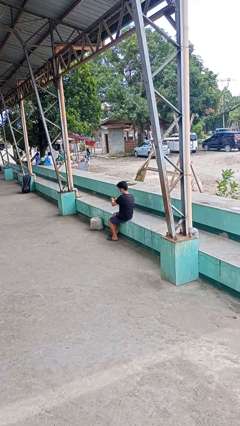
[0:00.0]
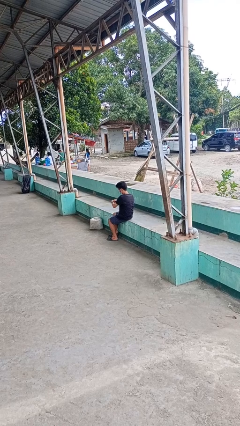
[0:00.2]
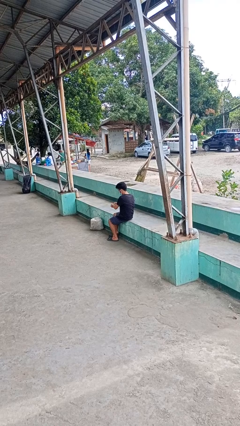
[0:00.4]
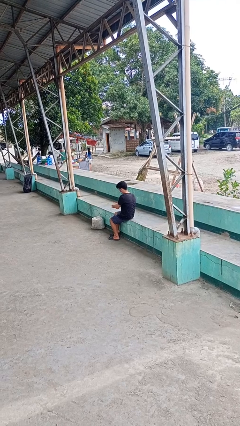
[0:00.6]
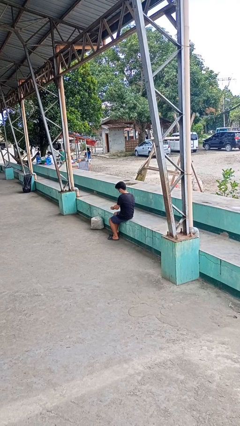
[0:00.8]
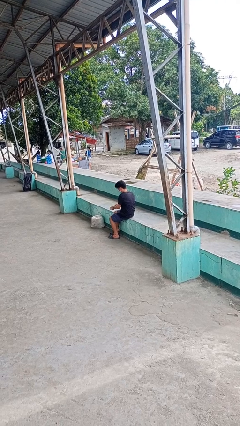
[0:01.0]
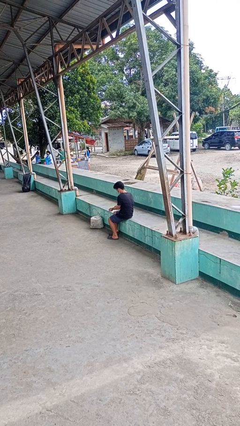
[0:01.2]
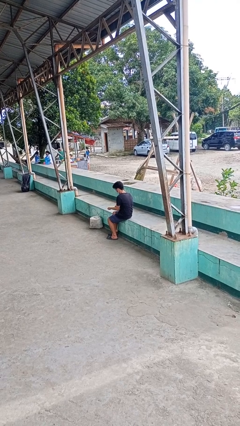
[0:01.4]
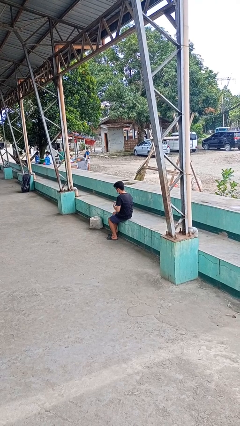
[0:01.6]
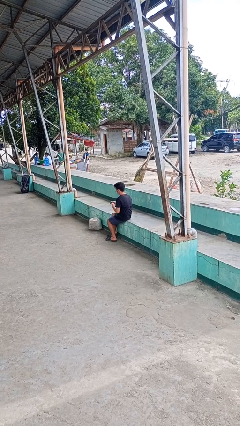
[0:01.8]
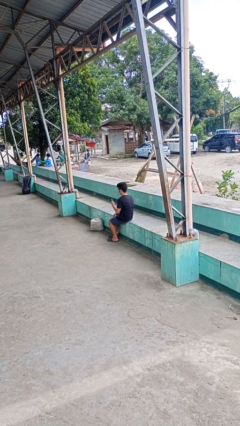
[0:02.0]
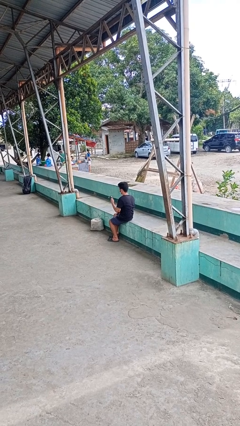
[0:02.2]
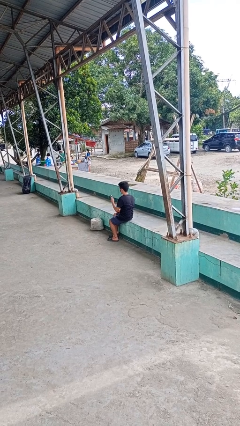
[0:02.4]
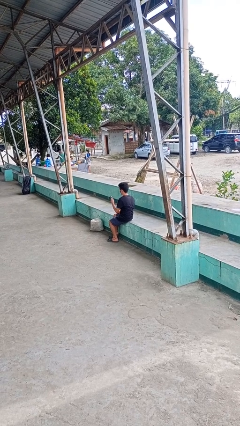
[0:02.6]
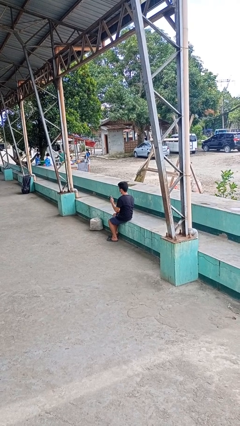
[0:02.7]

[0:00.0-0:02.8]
person takes off wristwatch

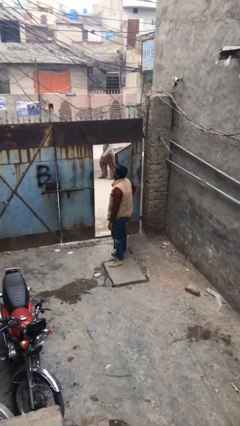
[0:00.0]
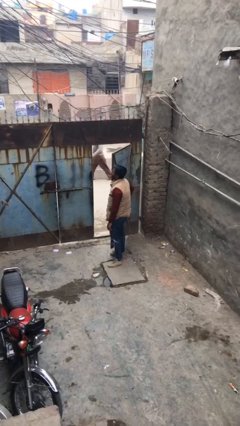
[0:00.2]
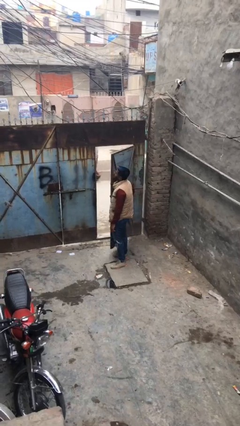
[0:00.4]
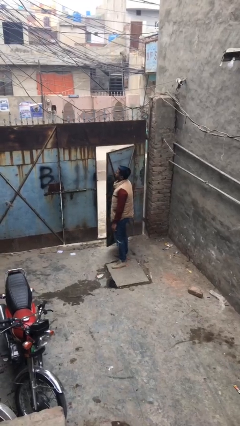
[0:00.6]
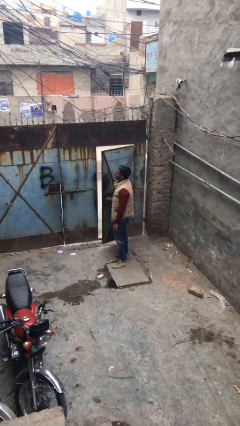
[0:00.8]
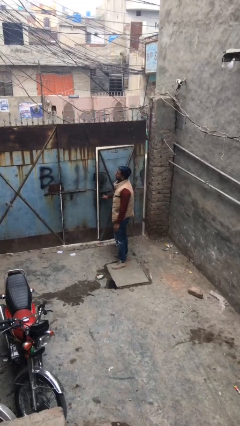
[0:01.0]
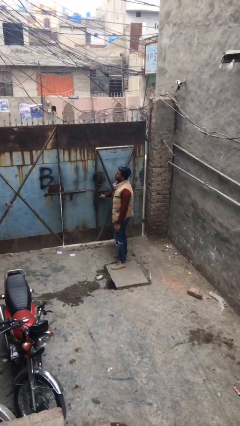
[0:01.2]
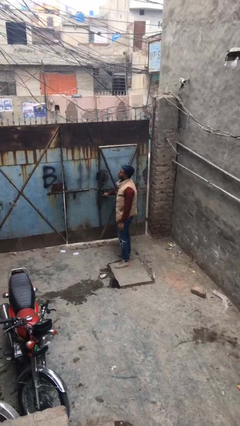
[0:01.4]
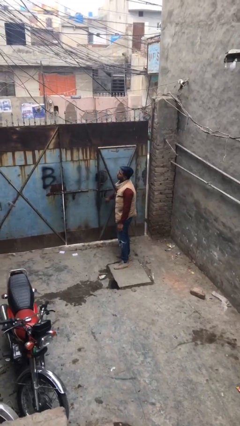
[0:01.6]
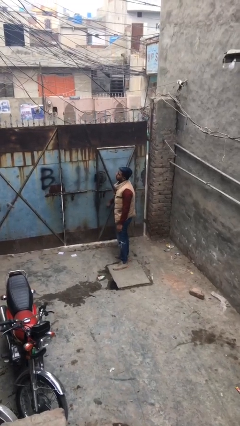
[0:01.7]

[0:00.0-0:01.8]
person closes facility door

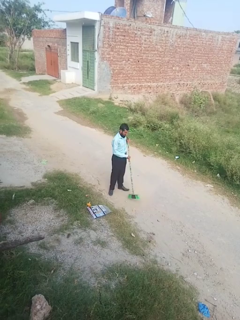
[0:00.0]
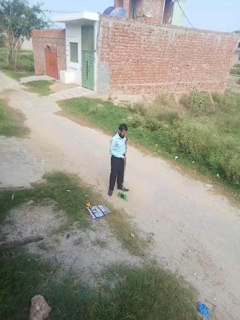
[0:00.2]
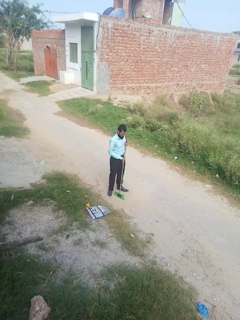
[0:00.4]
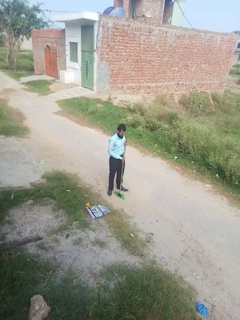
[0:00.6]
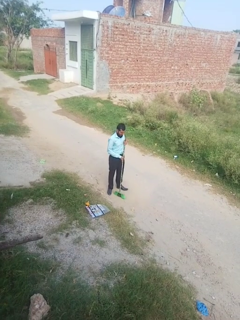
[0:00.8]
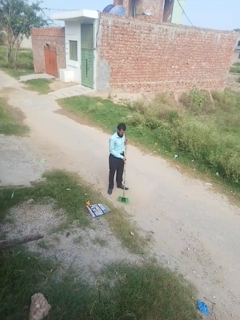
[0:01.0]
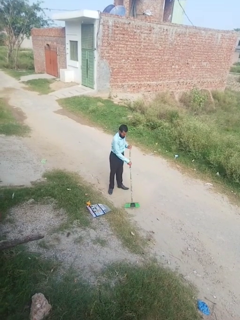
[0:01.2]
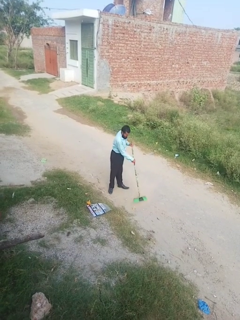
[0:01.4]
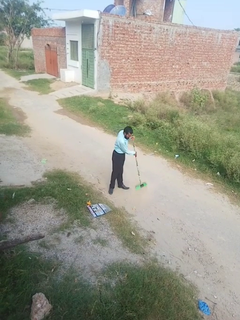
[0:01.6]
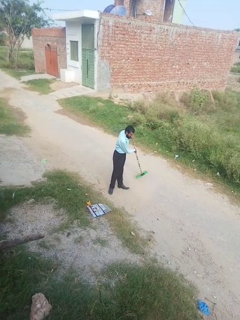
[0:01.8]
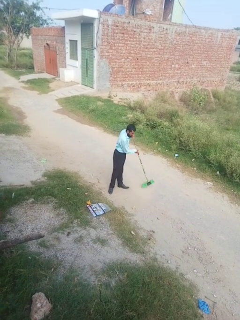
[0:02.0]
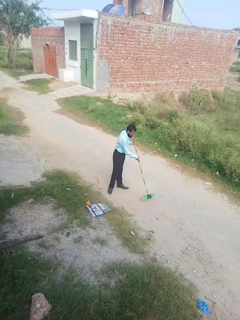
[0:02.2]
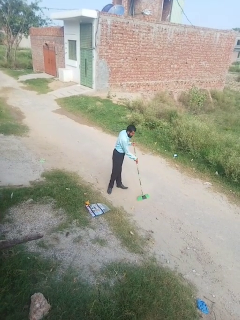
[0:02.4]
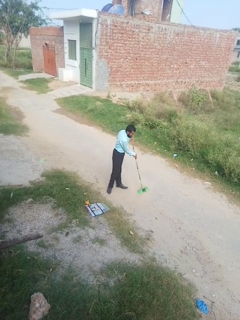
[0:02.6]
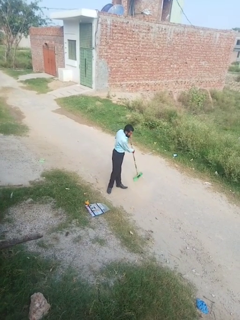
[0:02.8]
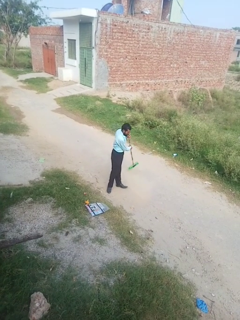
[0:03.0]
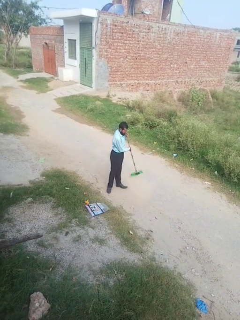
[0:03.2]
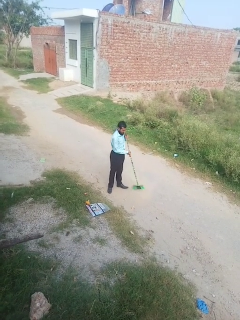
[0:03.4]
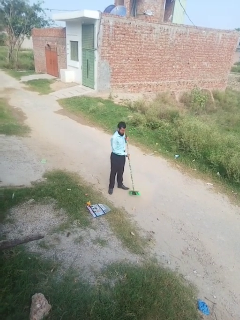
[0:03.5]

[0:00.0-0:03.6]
person sweeps floor

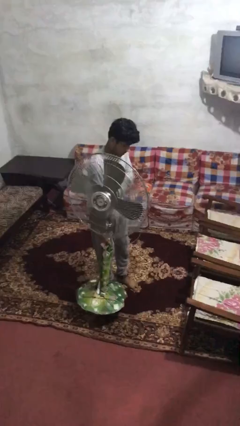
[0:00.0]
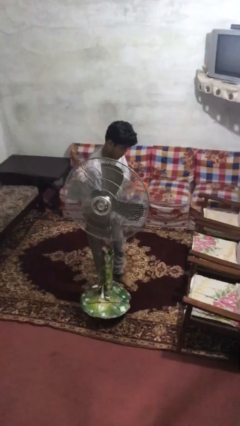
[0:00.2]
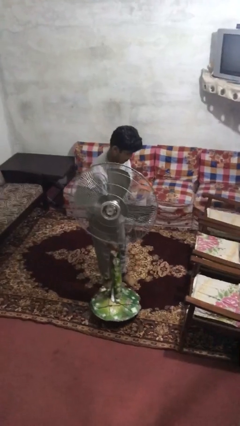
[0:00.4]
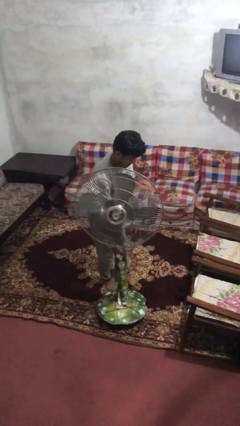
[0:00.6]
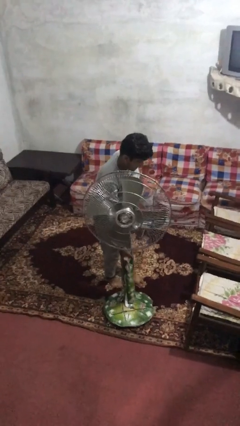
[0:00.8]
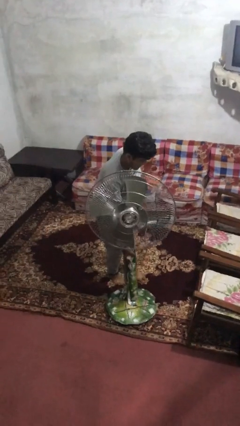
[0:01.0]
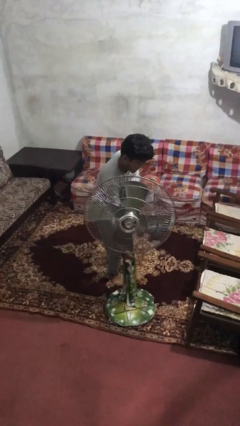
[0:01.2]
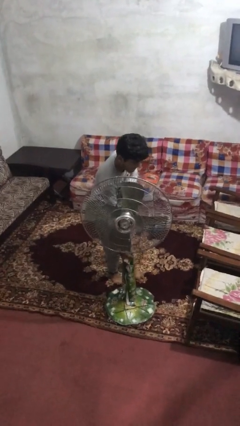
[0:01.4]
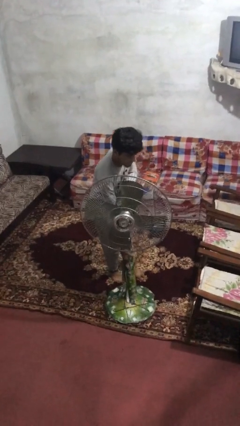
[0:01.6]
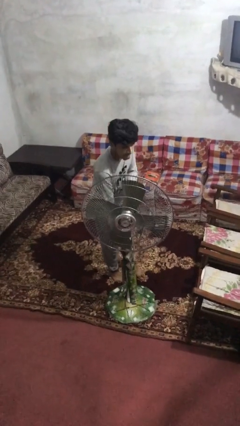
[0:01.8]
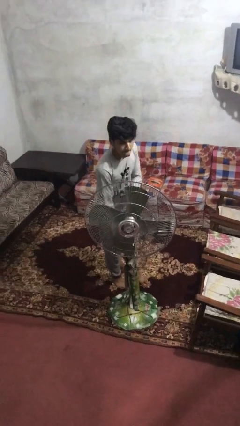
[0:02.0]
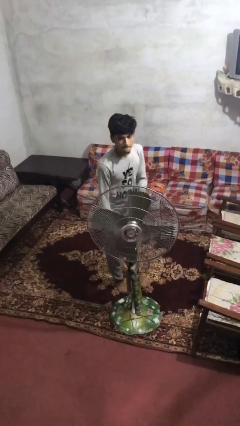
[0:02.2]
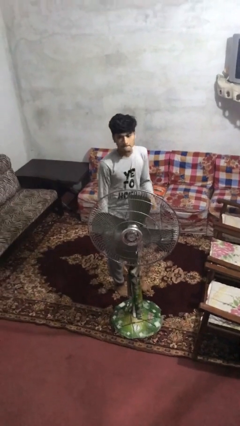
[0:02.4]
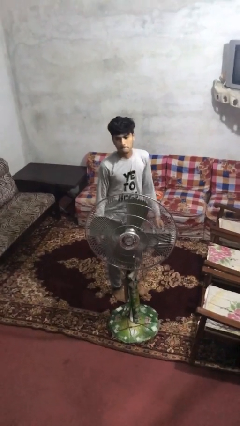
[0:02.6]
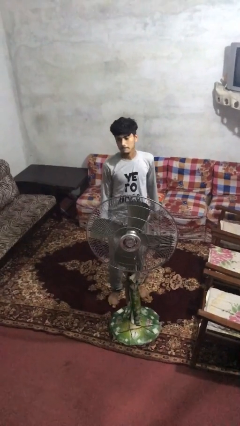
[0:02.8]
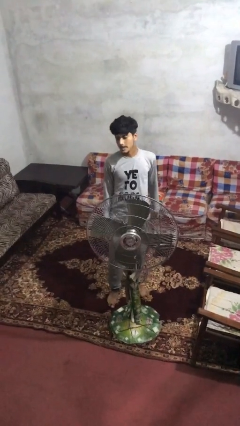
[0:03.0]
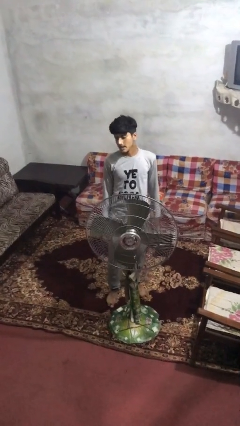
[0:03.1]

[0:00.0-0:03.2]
person puts down object on floor

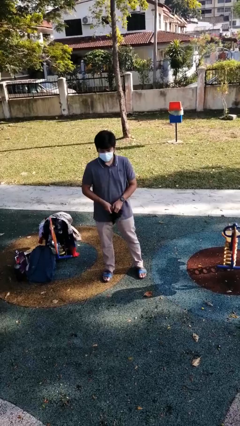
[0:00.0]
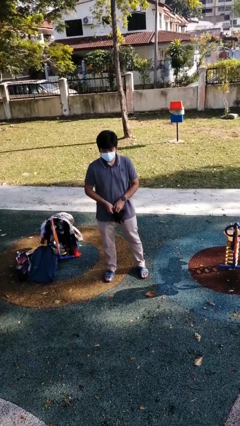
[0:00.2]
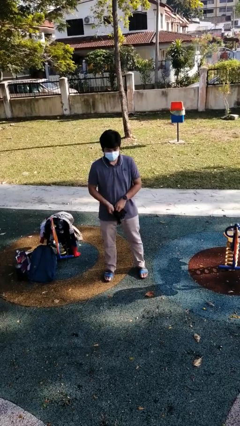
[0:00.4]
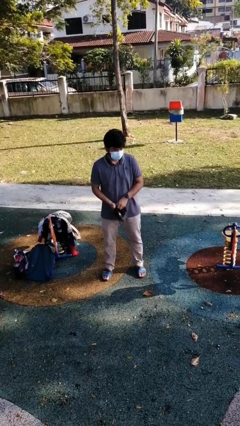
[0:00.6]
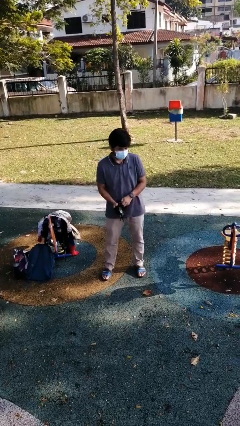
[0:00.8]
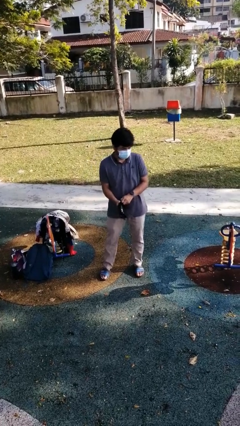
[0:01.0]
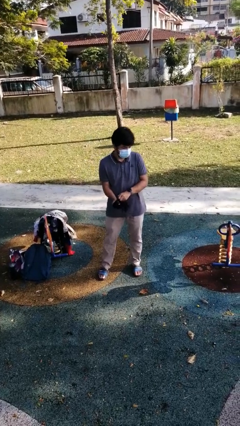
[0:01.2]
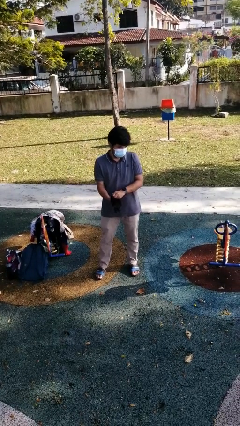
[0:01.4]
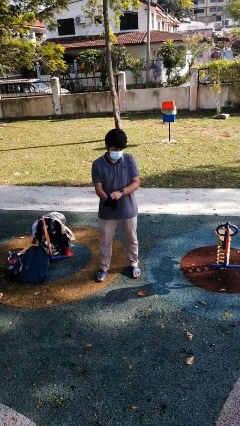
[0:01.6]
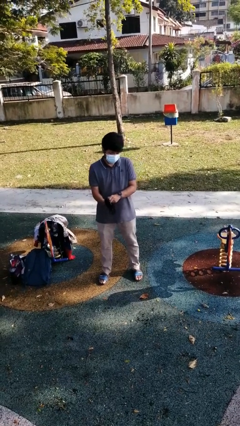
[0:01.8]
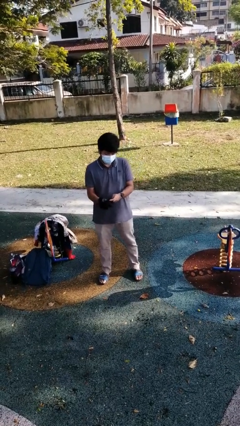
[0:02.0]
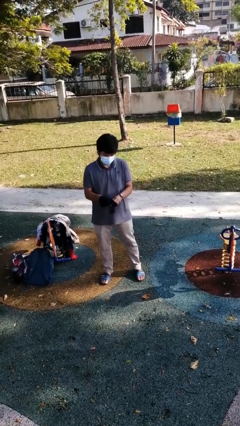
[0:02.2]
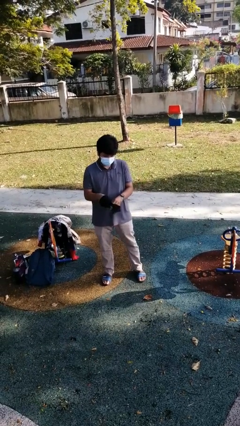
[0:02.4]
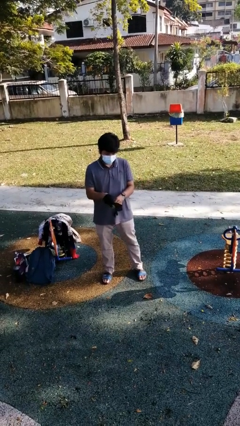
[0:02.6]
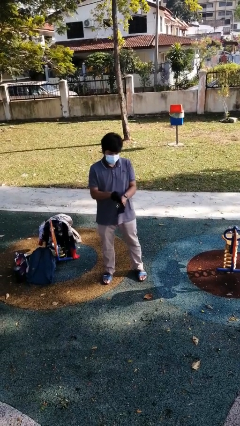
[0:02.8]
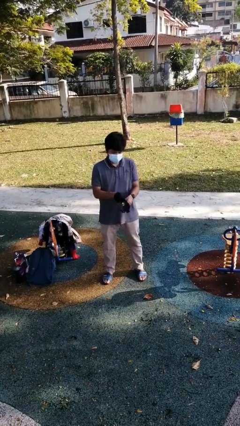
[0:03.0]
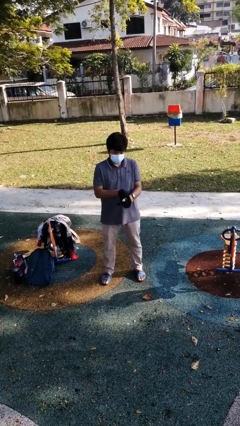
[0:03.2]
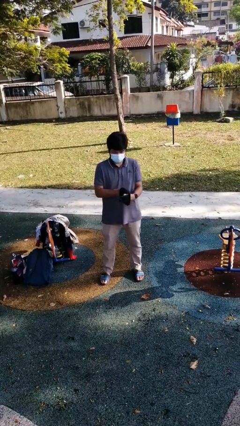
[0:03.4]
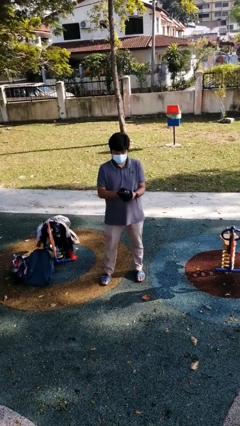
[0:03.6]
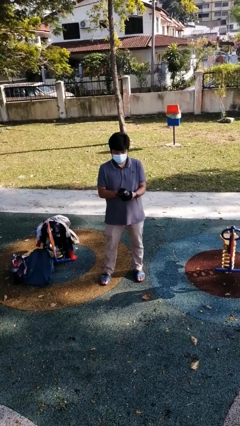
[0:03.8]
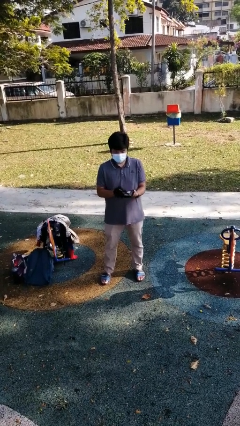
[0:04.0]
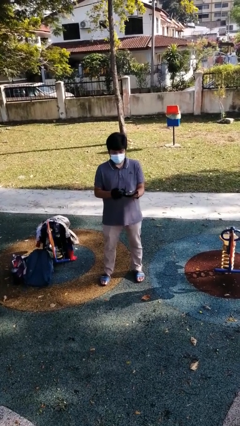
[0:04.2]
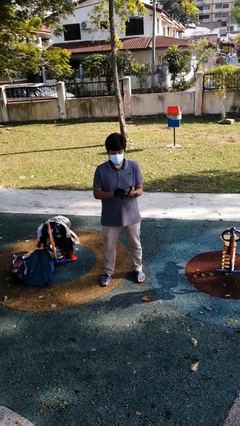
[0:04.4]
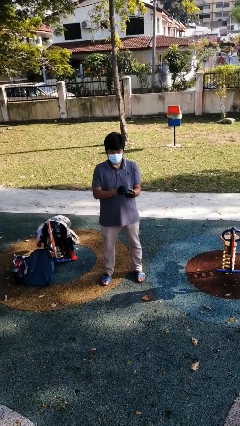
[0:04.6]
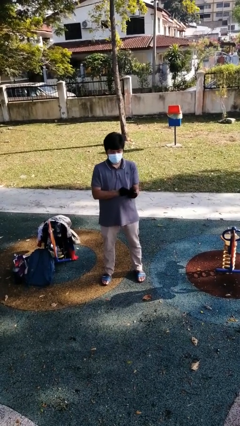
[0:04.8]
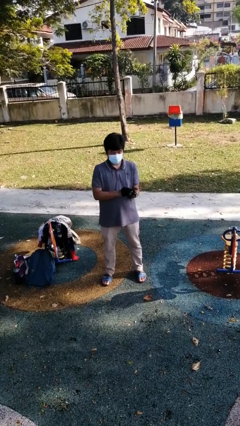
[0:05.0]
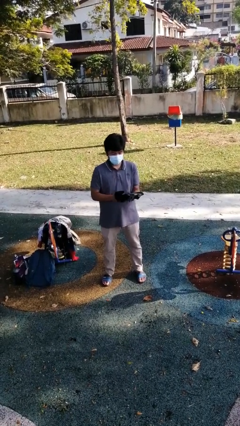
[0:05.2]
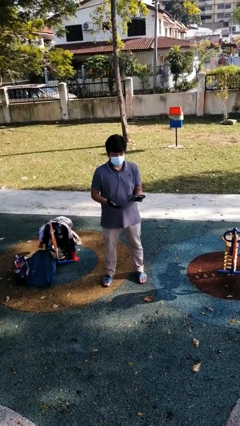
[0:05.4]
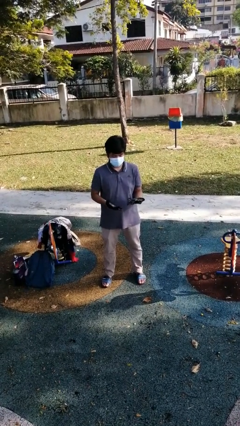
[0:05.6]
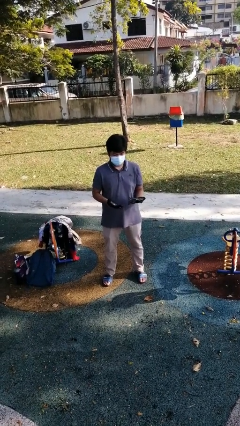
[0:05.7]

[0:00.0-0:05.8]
person puts on gloves

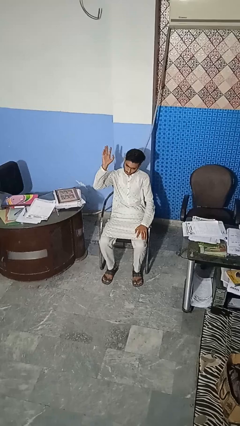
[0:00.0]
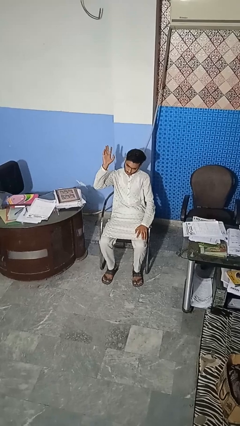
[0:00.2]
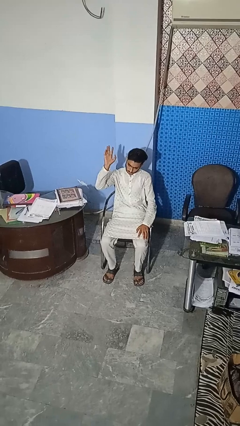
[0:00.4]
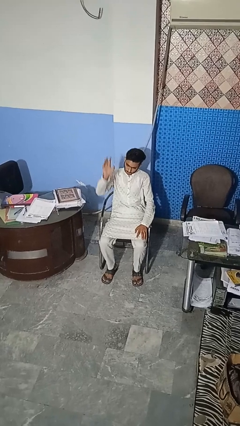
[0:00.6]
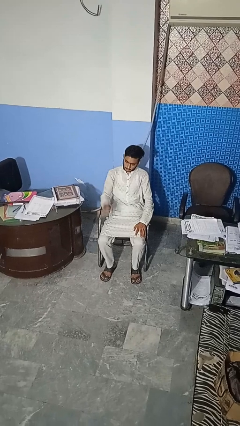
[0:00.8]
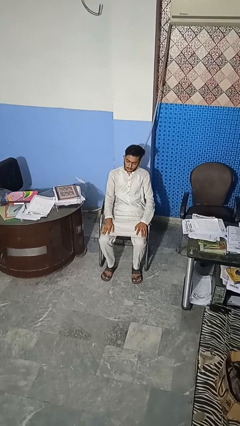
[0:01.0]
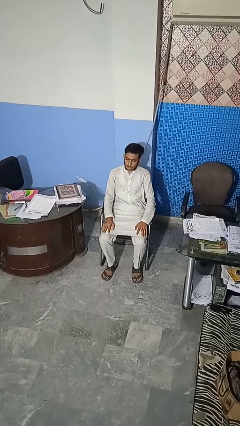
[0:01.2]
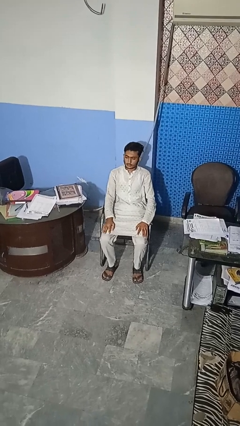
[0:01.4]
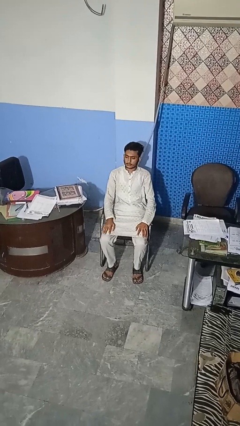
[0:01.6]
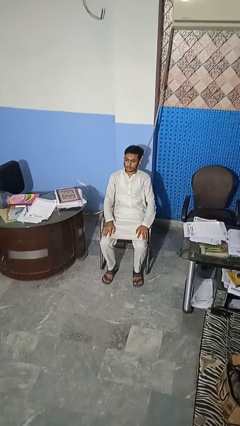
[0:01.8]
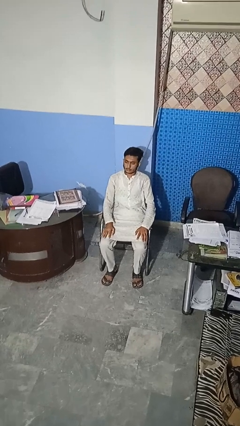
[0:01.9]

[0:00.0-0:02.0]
person gestures lower hand
